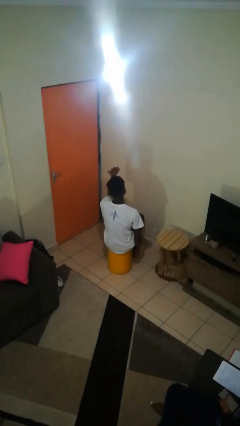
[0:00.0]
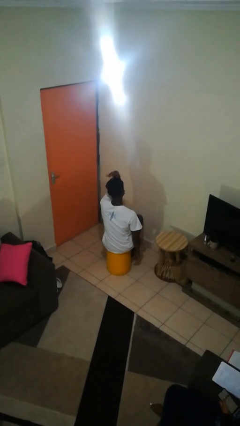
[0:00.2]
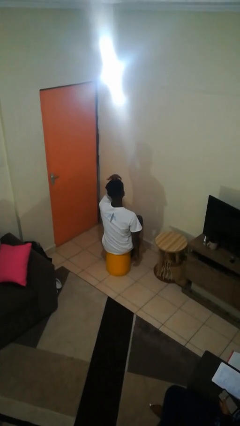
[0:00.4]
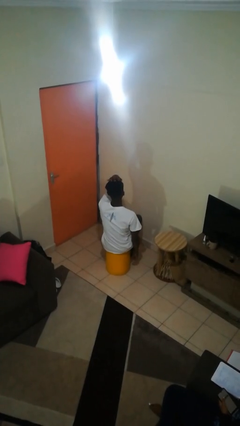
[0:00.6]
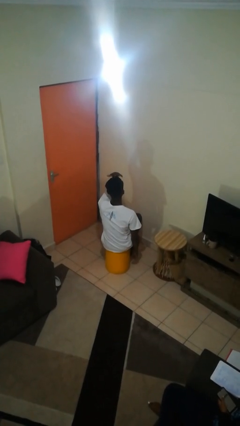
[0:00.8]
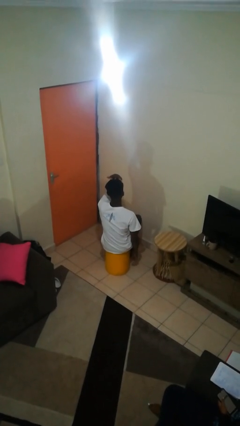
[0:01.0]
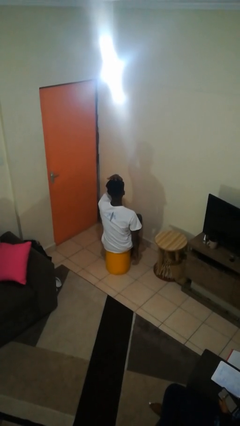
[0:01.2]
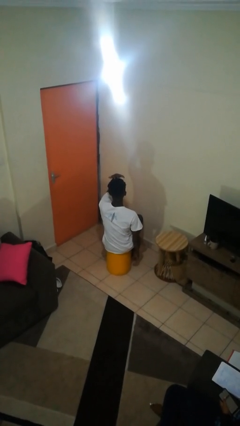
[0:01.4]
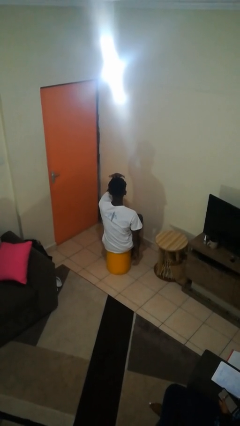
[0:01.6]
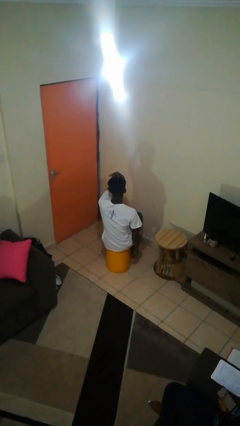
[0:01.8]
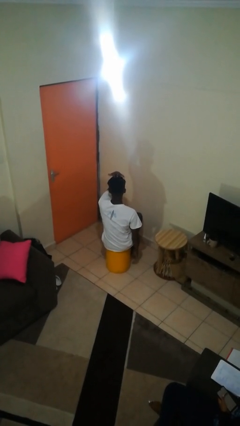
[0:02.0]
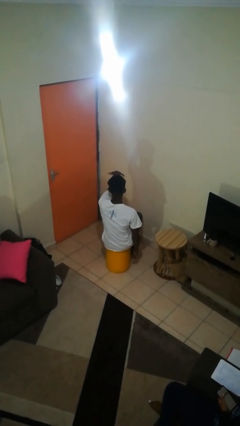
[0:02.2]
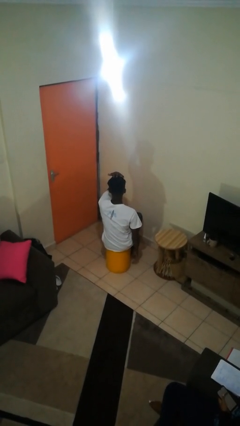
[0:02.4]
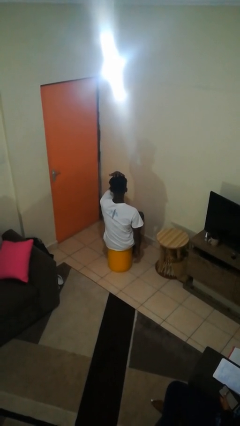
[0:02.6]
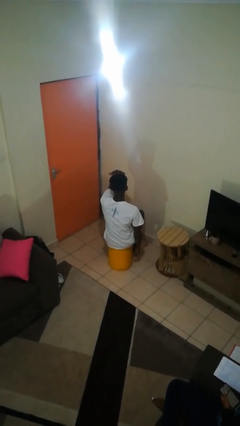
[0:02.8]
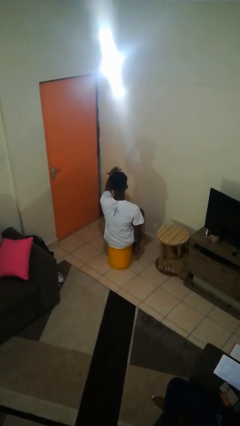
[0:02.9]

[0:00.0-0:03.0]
person pats head

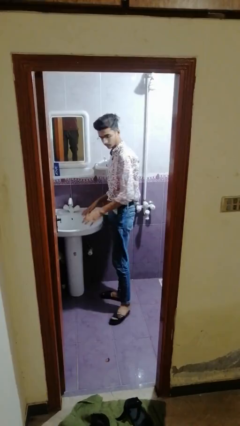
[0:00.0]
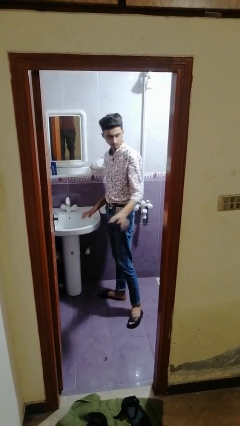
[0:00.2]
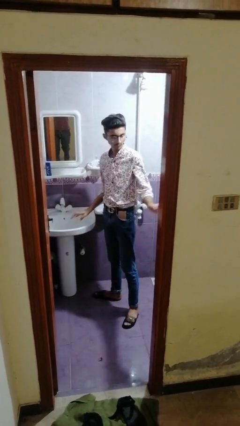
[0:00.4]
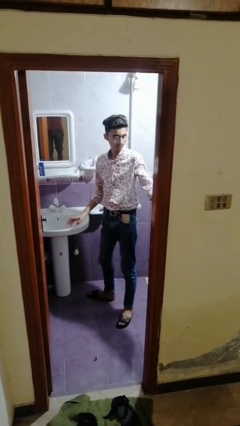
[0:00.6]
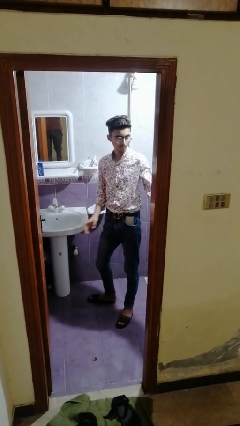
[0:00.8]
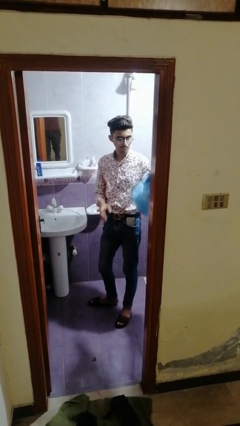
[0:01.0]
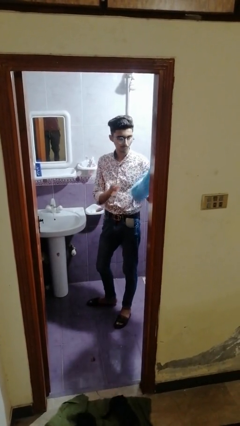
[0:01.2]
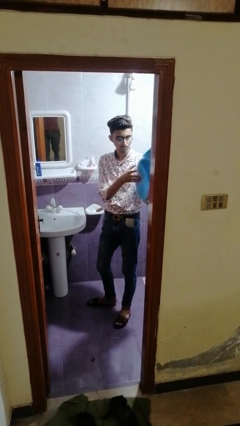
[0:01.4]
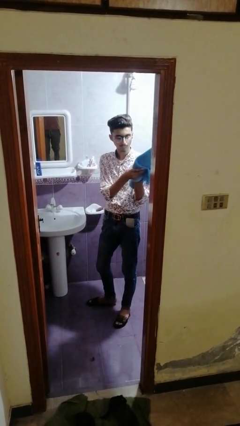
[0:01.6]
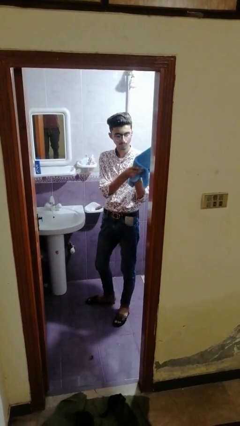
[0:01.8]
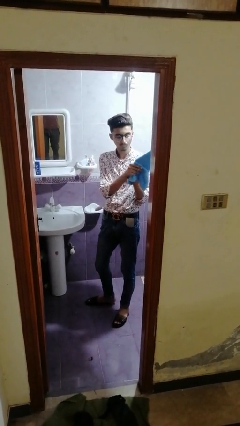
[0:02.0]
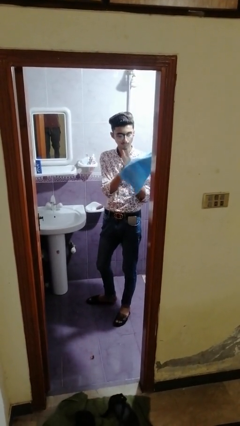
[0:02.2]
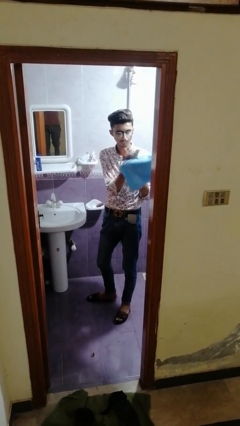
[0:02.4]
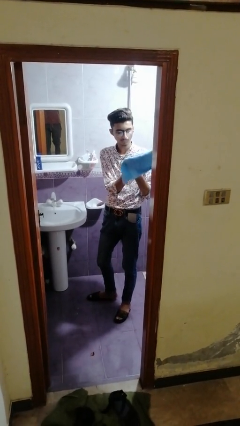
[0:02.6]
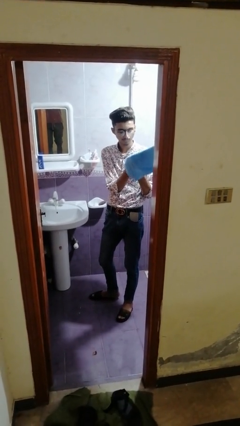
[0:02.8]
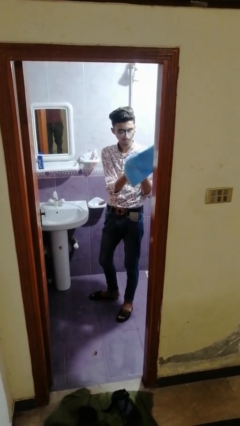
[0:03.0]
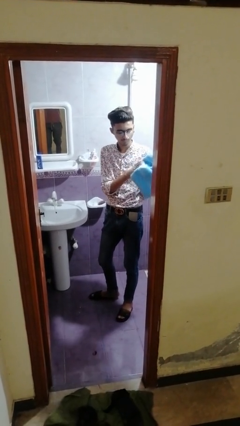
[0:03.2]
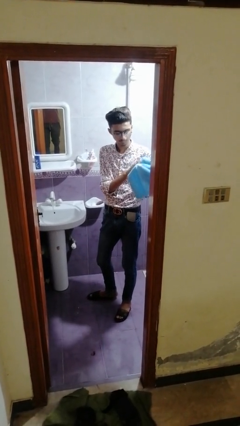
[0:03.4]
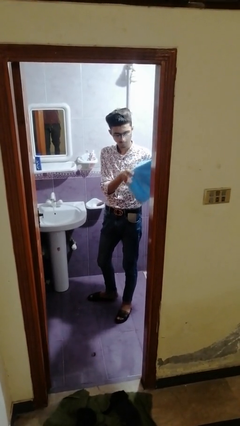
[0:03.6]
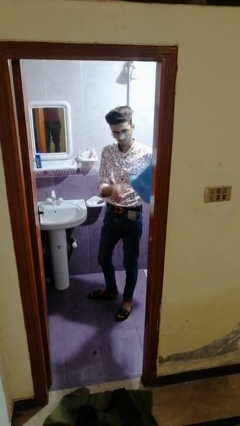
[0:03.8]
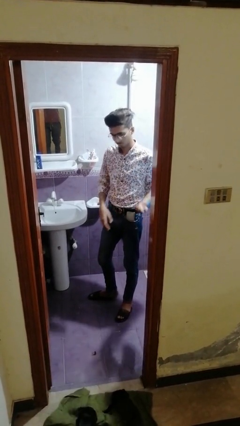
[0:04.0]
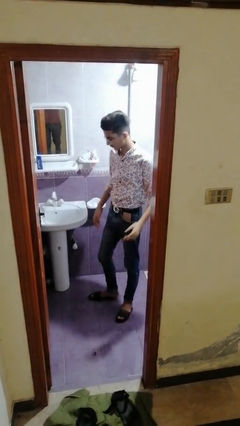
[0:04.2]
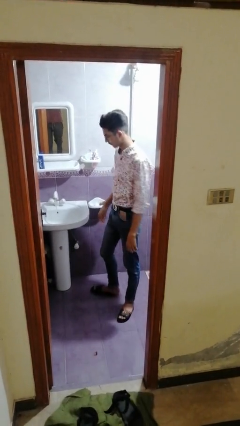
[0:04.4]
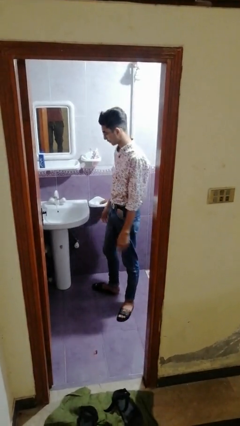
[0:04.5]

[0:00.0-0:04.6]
person dries hands with towel

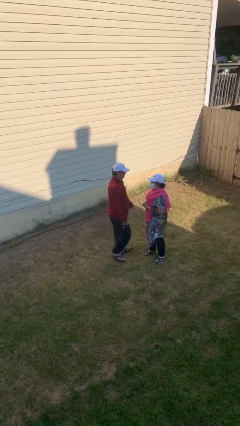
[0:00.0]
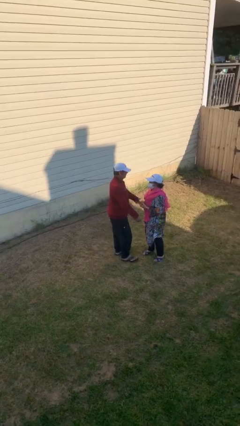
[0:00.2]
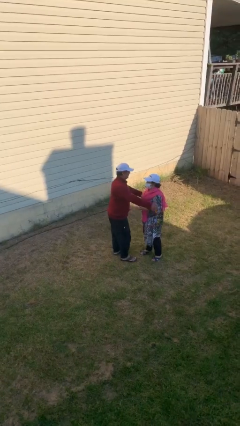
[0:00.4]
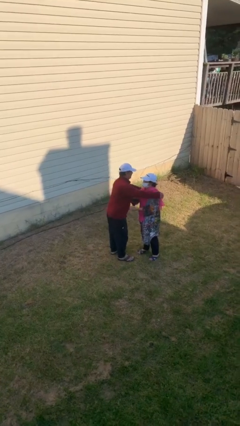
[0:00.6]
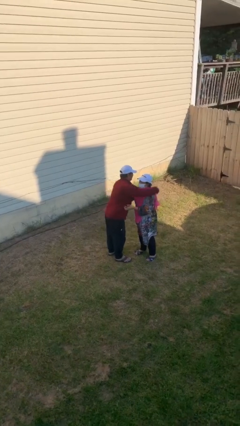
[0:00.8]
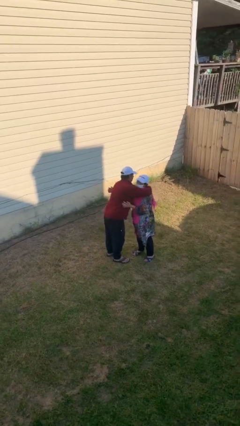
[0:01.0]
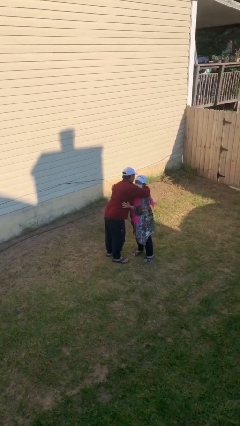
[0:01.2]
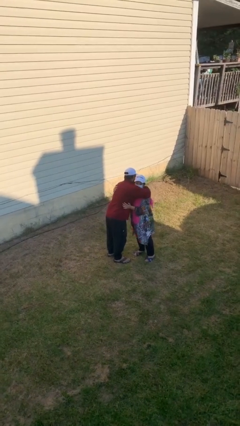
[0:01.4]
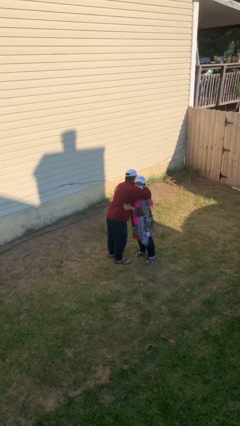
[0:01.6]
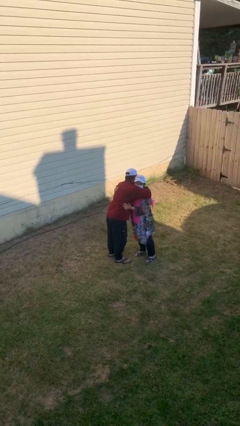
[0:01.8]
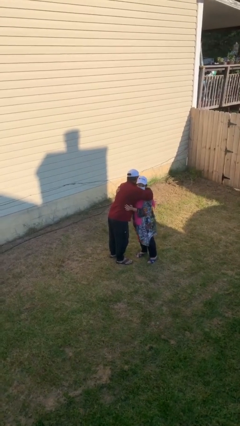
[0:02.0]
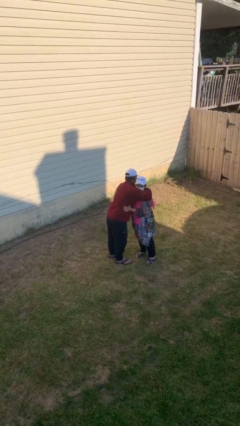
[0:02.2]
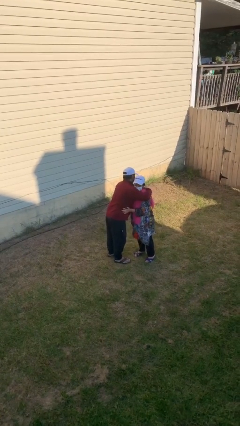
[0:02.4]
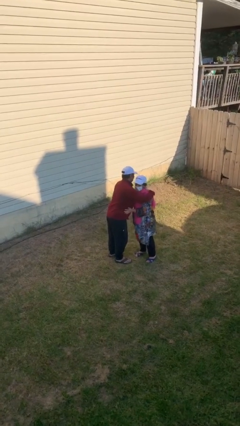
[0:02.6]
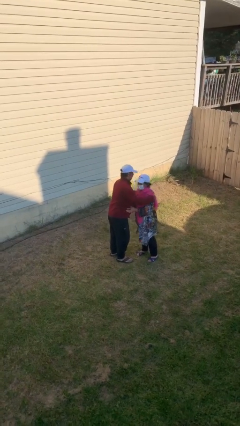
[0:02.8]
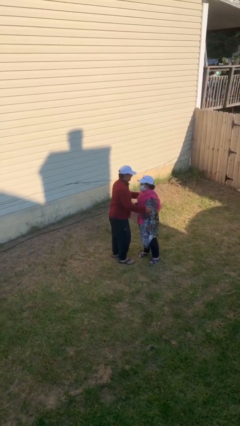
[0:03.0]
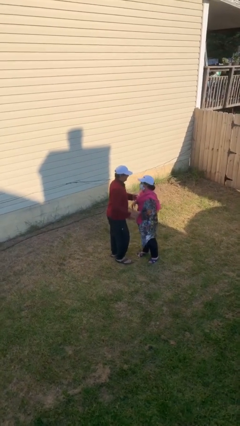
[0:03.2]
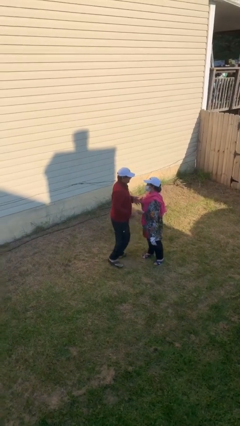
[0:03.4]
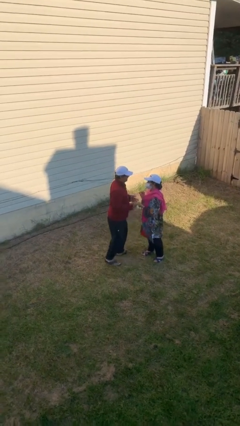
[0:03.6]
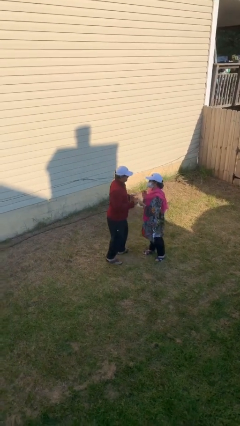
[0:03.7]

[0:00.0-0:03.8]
person embraces person

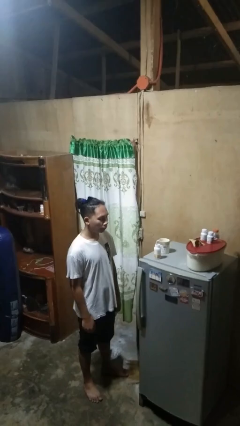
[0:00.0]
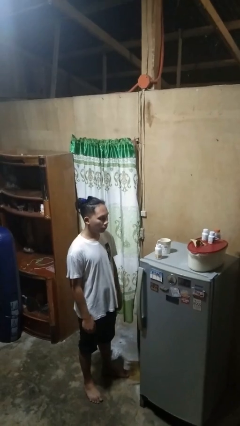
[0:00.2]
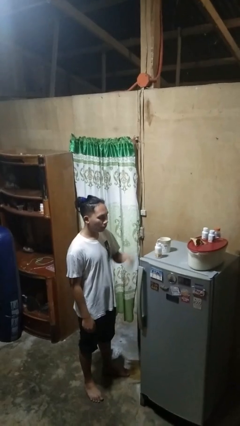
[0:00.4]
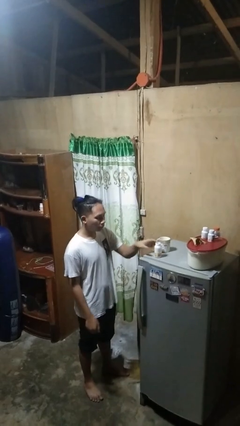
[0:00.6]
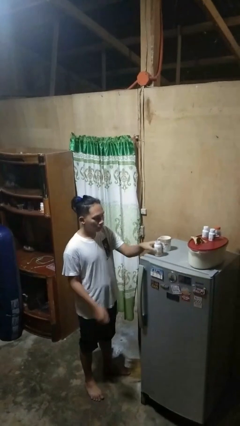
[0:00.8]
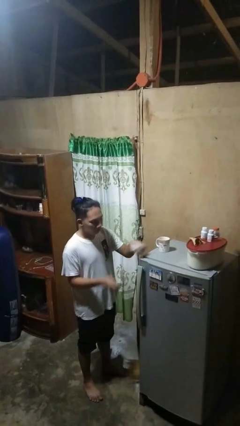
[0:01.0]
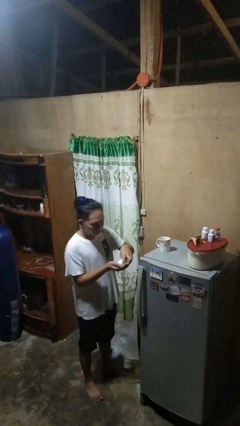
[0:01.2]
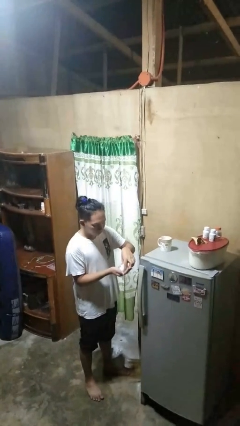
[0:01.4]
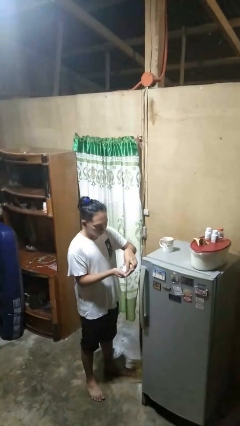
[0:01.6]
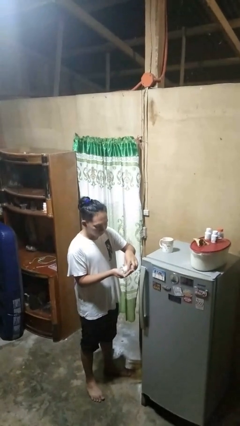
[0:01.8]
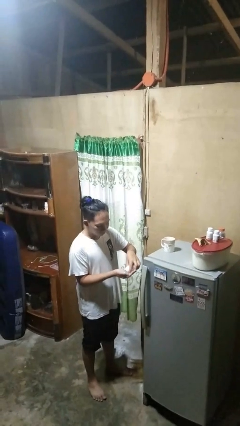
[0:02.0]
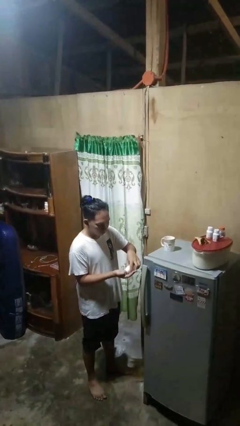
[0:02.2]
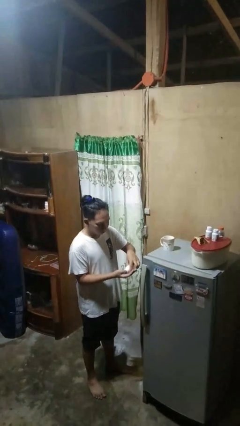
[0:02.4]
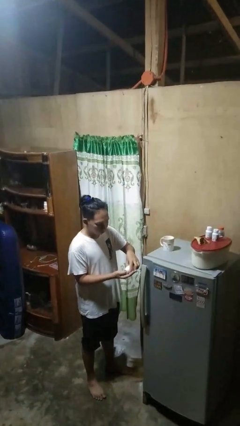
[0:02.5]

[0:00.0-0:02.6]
person takes medicine pills

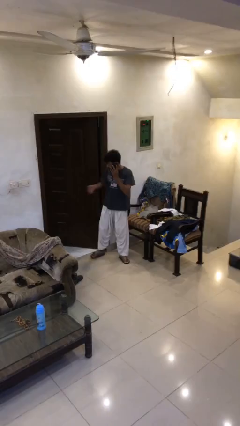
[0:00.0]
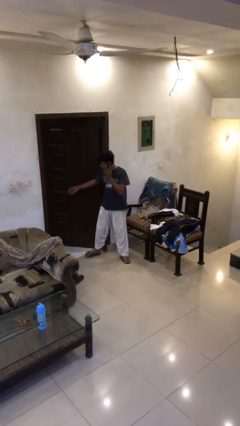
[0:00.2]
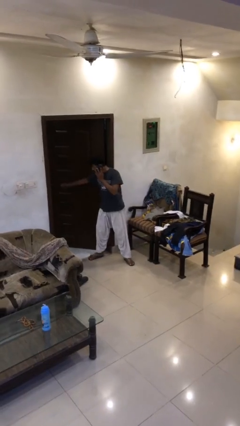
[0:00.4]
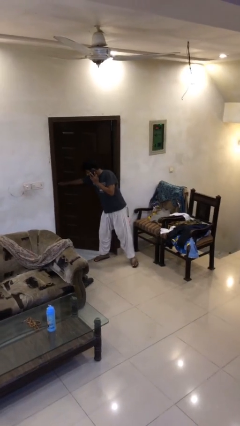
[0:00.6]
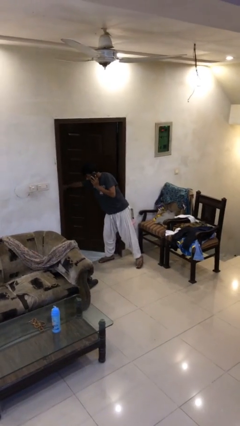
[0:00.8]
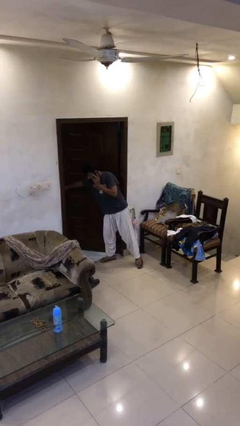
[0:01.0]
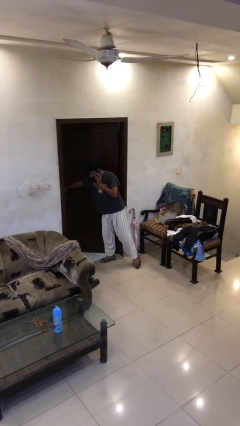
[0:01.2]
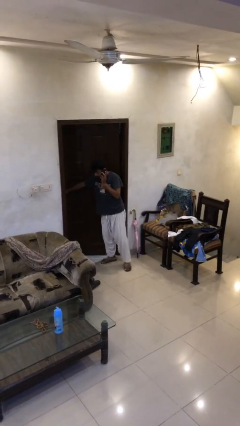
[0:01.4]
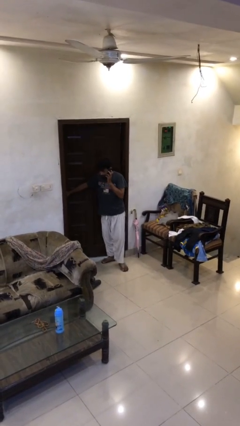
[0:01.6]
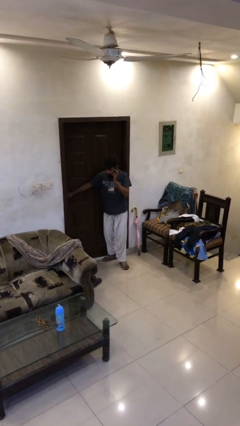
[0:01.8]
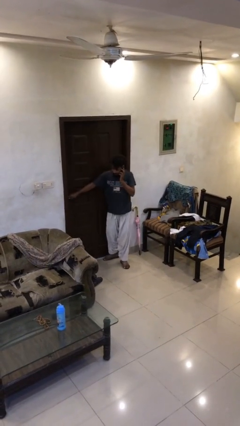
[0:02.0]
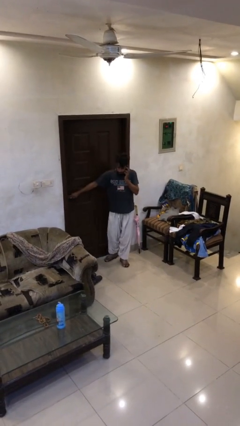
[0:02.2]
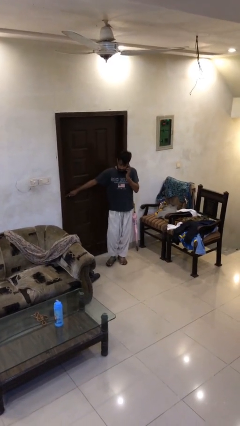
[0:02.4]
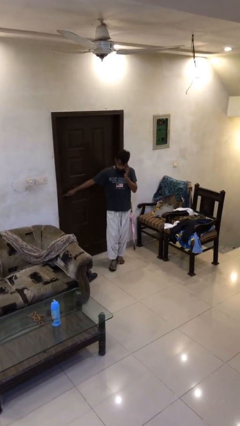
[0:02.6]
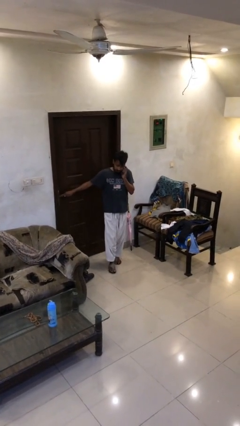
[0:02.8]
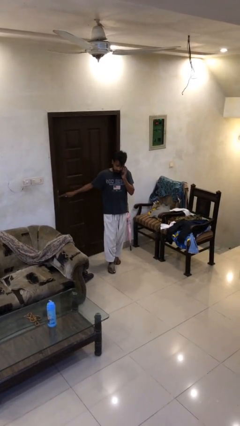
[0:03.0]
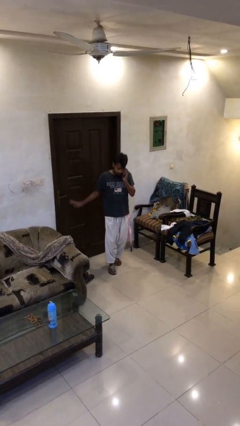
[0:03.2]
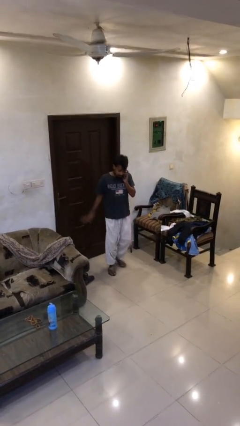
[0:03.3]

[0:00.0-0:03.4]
person closes facility door

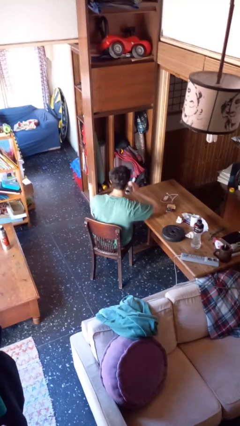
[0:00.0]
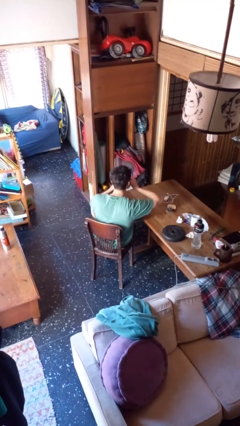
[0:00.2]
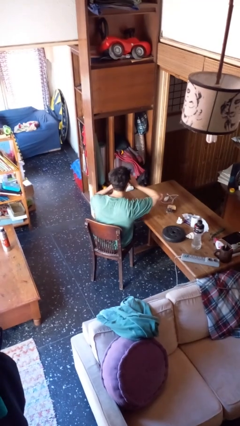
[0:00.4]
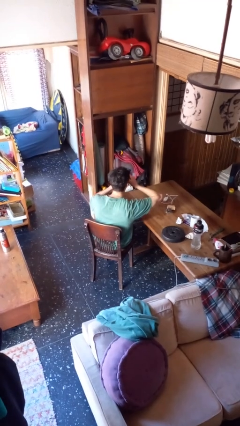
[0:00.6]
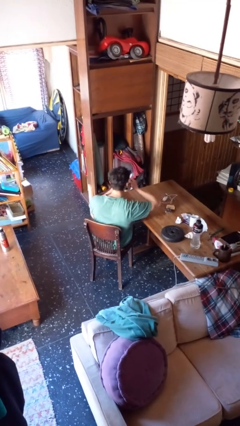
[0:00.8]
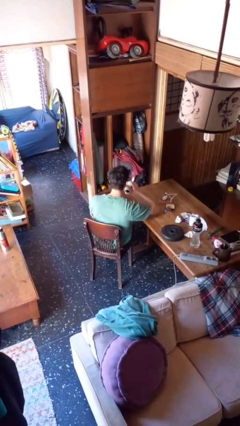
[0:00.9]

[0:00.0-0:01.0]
person drinks from mug
